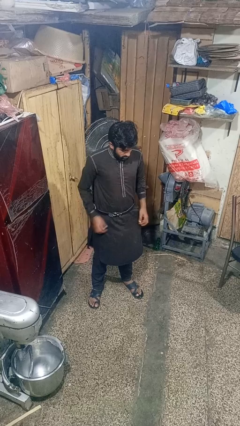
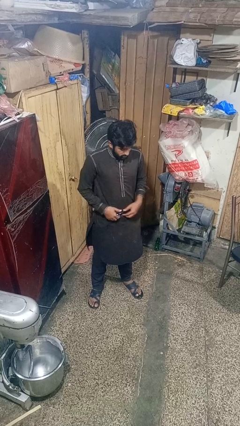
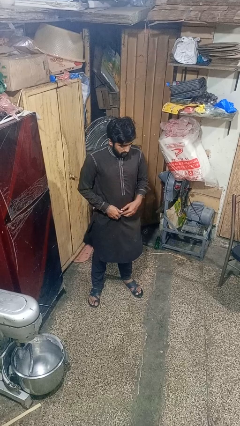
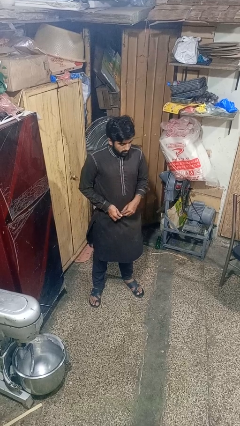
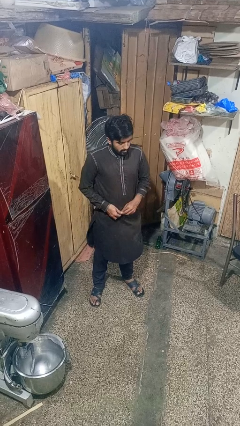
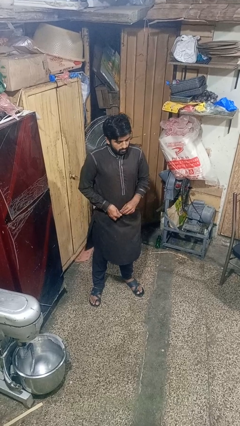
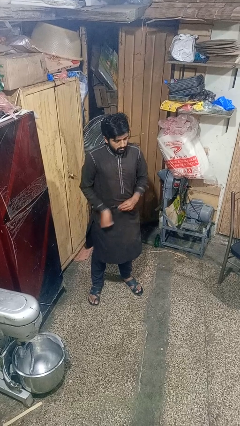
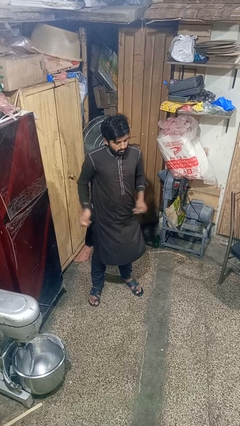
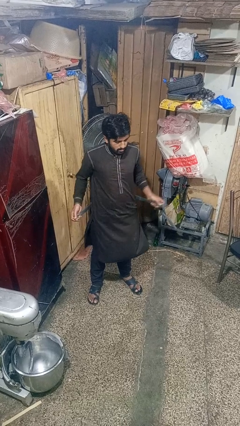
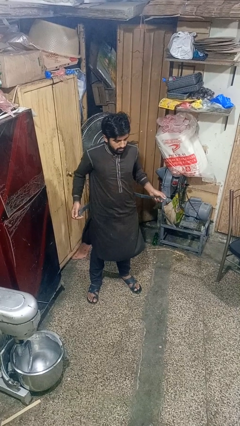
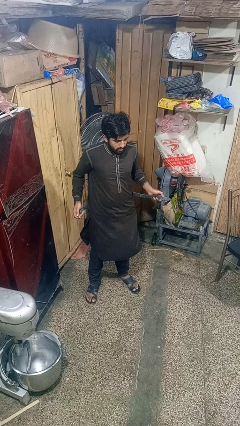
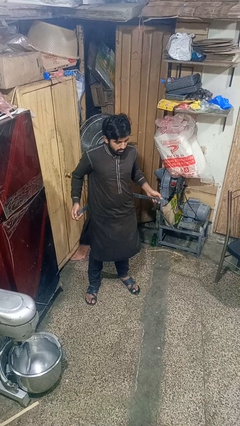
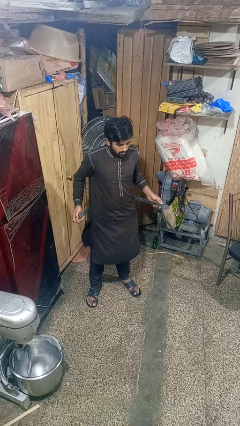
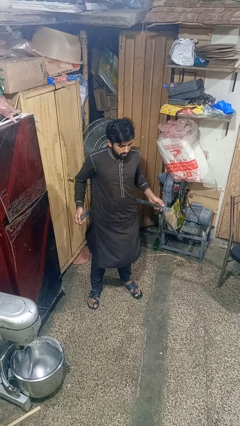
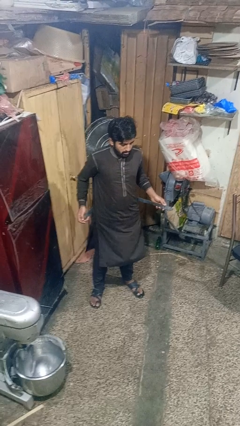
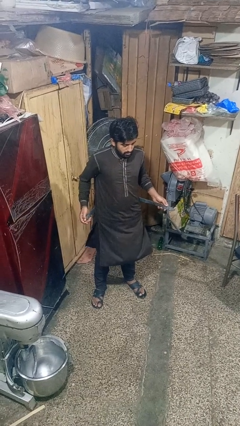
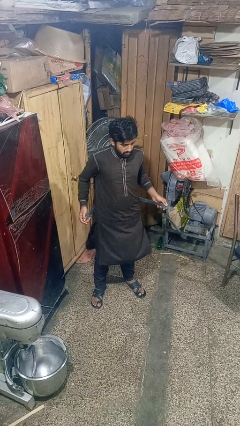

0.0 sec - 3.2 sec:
person takes off belt

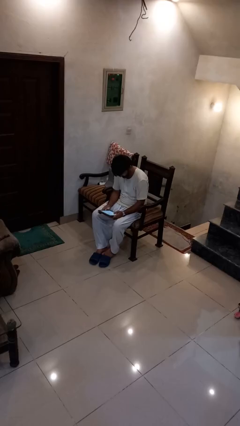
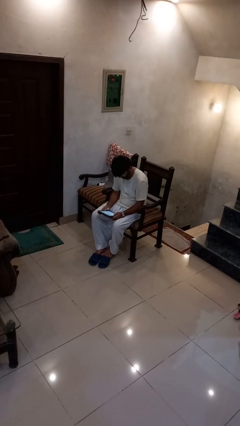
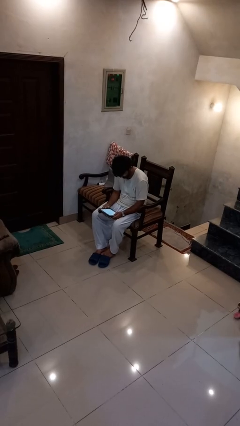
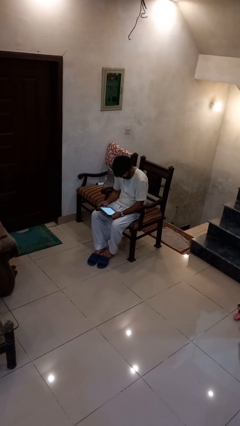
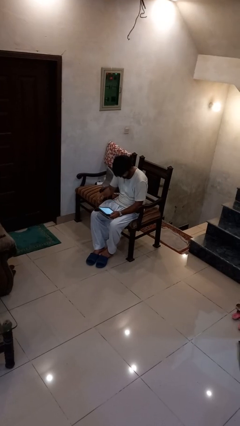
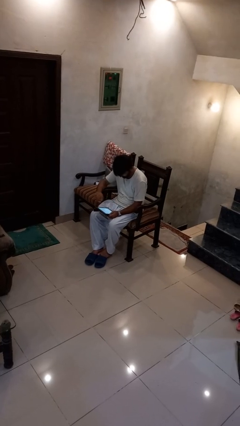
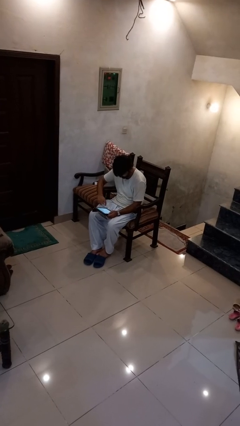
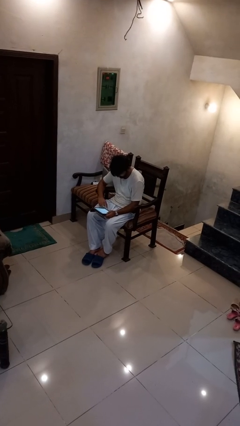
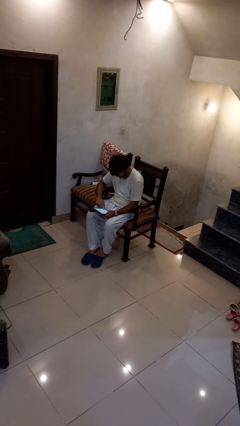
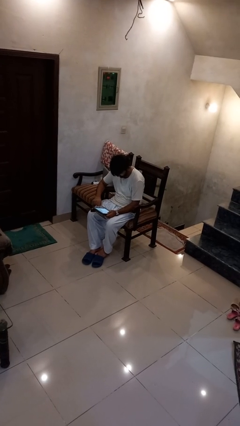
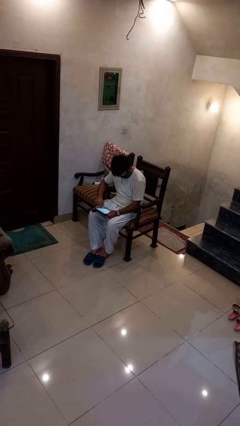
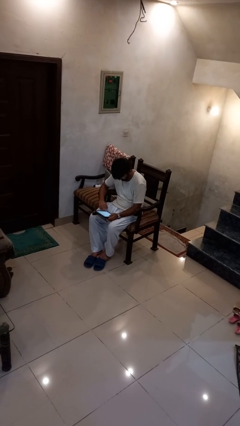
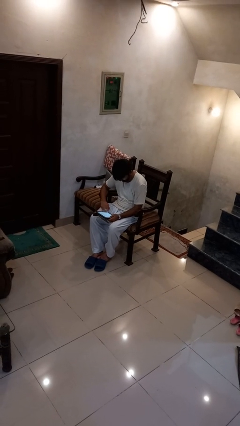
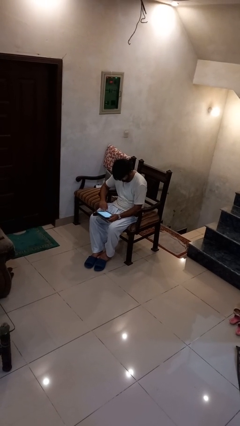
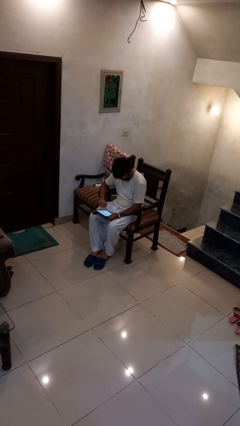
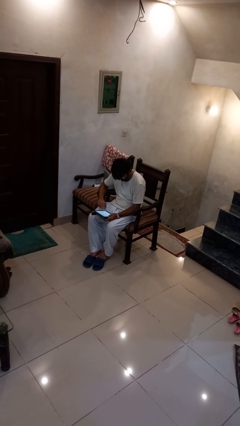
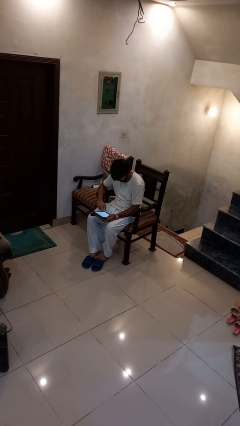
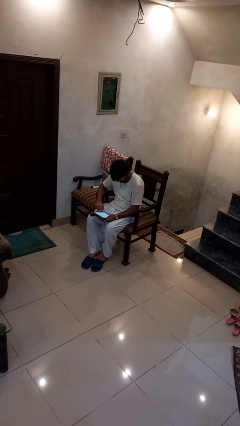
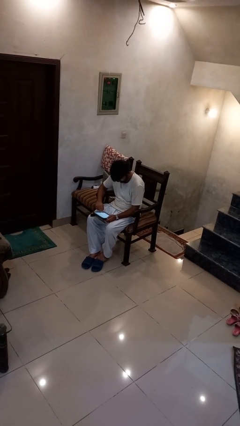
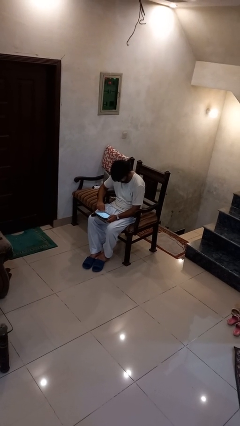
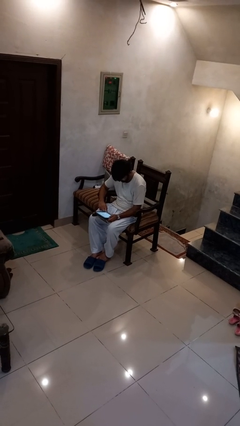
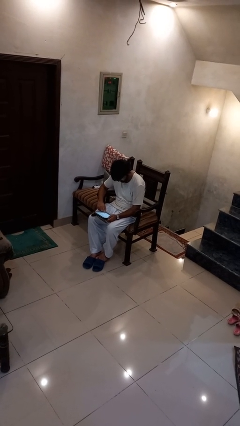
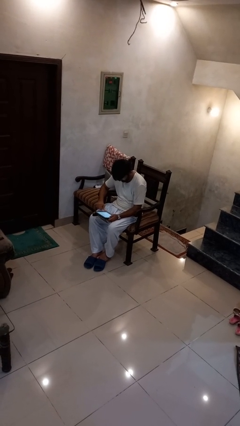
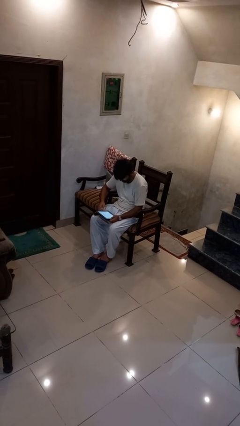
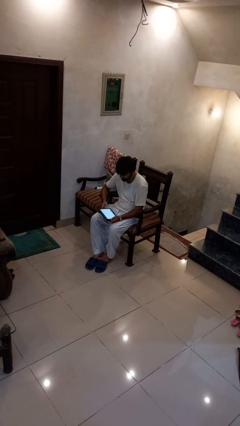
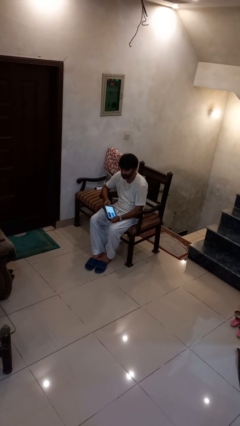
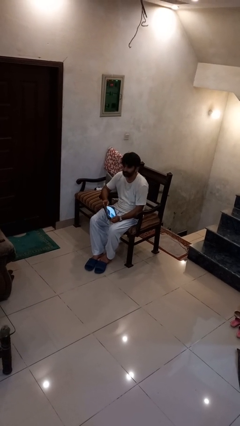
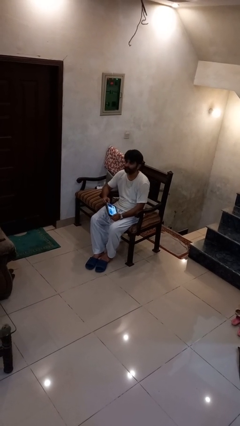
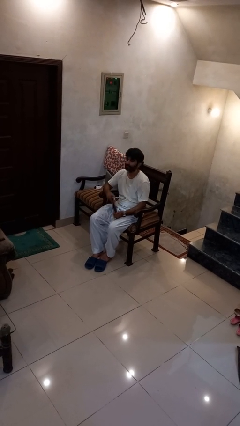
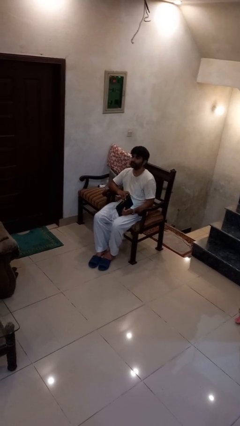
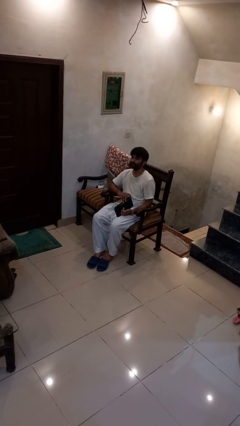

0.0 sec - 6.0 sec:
person interacts with tablet

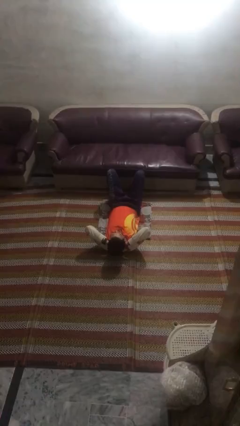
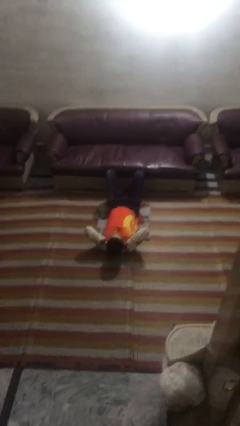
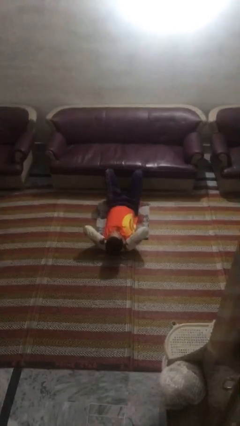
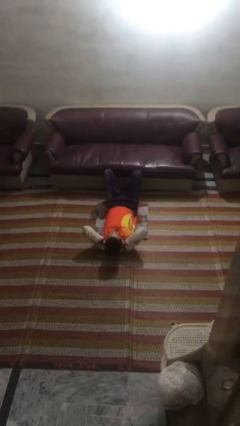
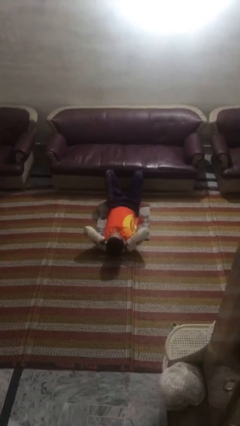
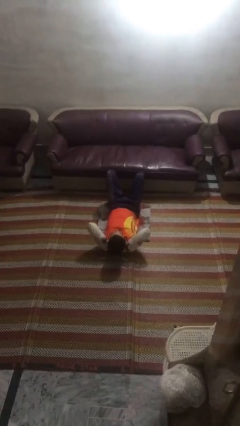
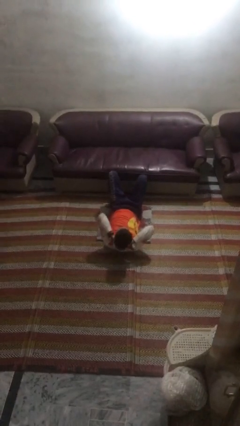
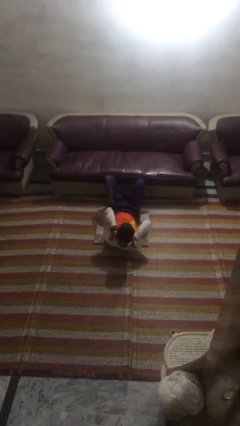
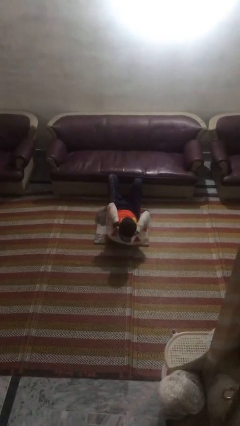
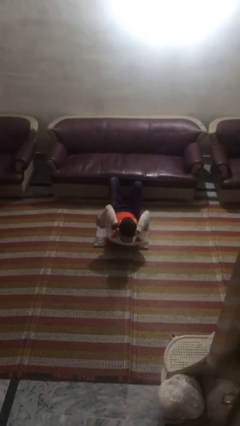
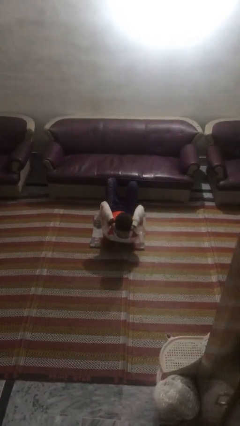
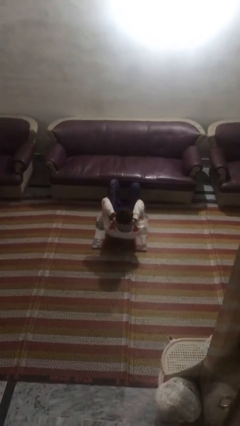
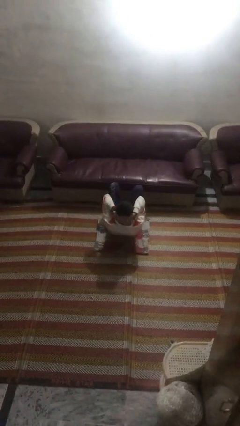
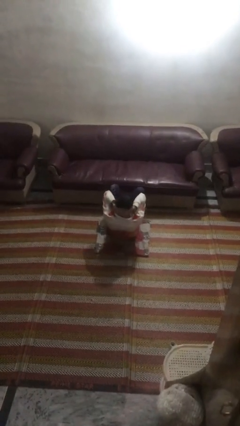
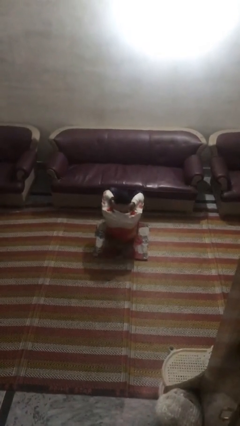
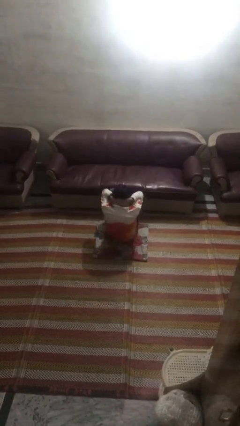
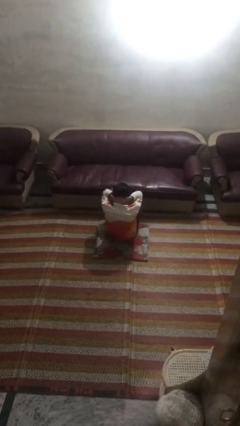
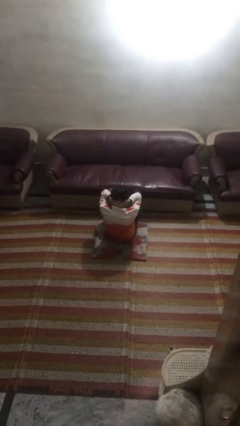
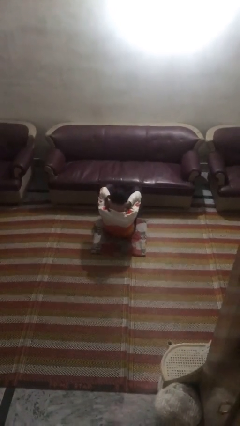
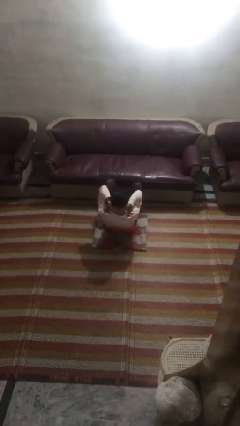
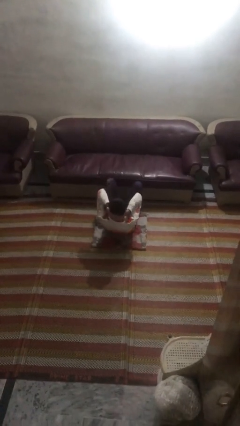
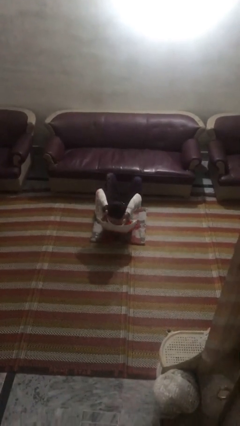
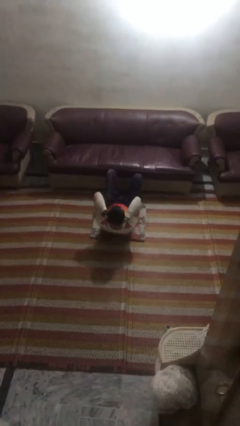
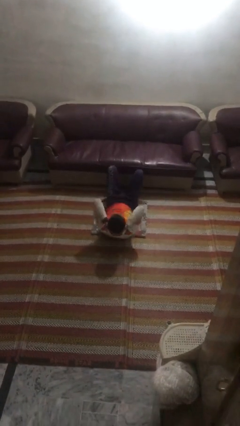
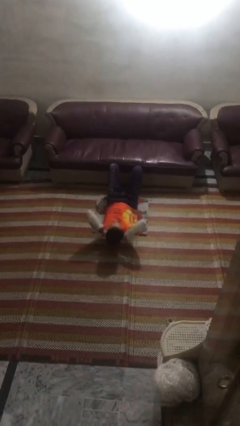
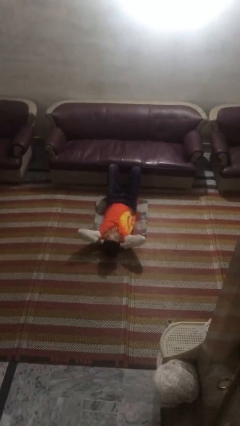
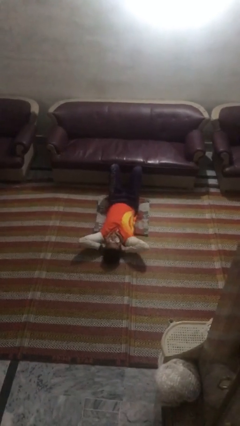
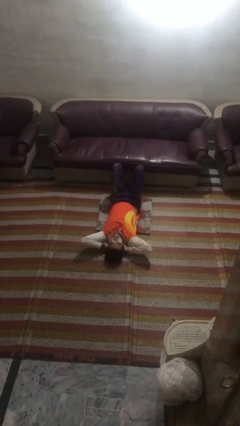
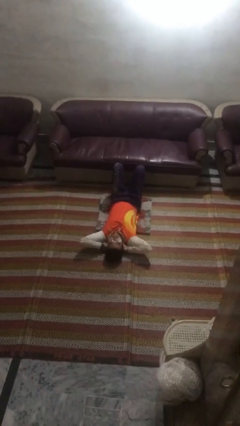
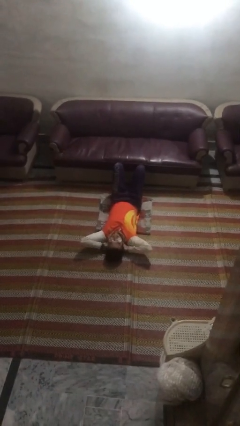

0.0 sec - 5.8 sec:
person exercises with situp

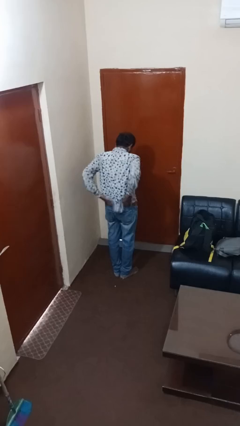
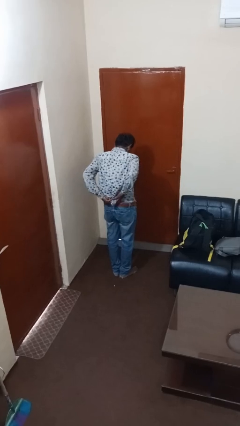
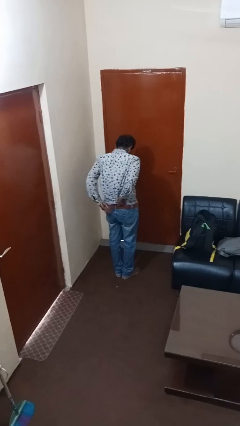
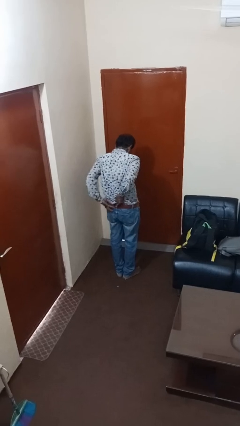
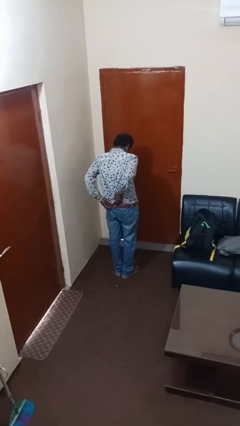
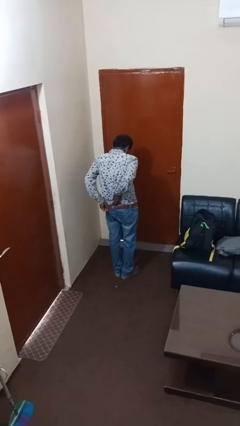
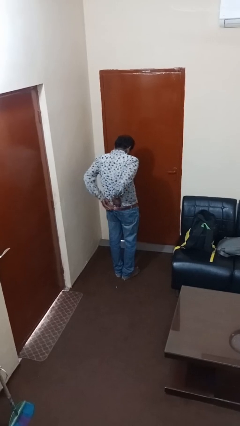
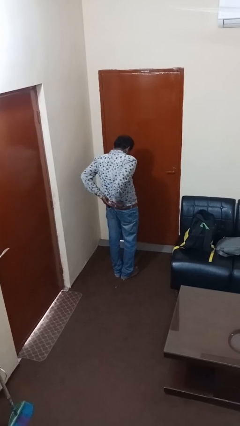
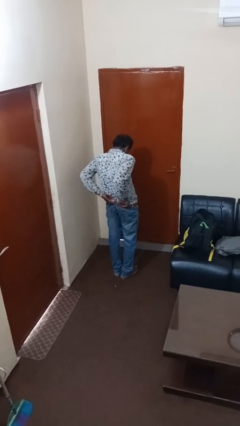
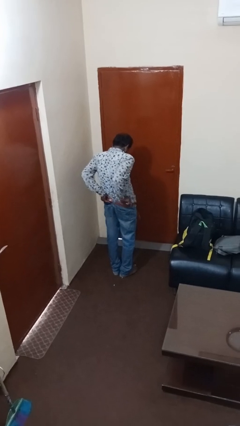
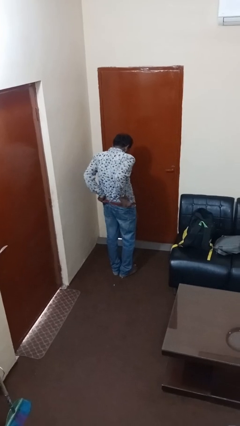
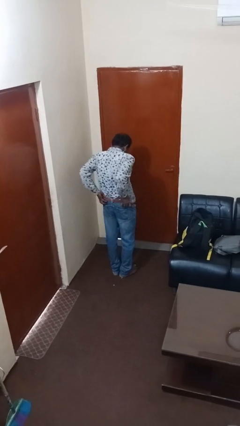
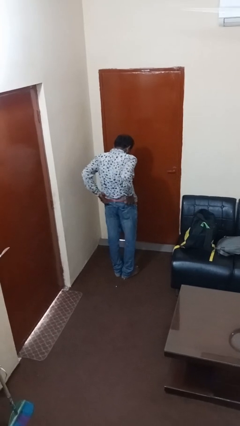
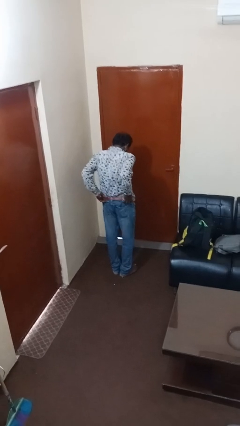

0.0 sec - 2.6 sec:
person tucks in shirt
